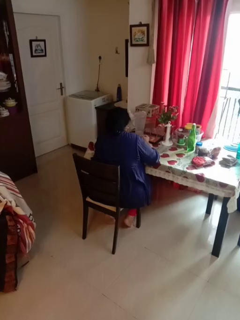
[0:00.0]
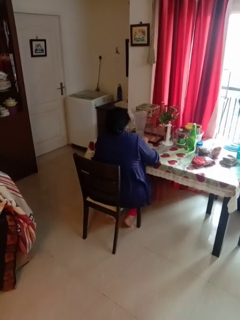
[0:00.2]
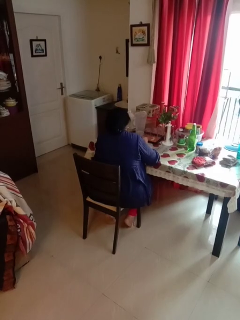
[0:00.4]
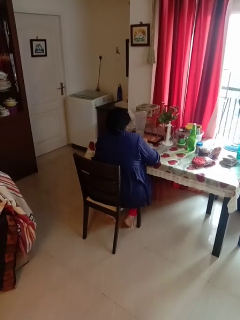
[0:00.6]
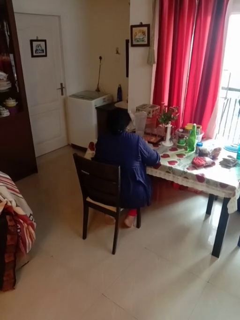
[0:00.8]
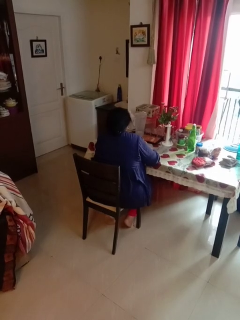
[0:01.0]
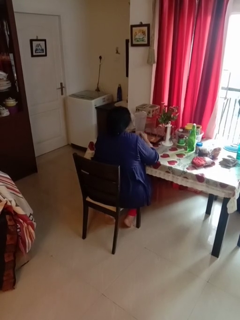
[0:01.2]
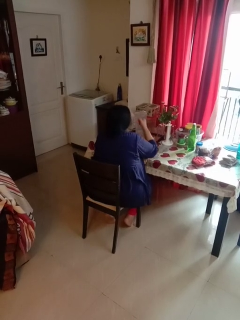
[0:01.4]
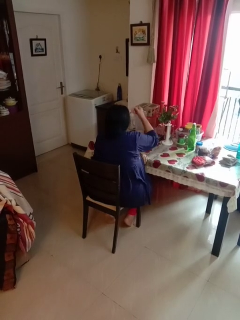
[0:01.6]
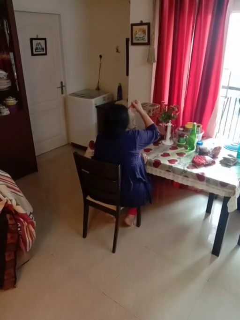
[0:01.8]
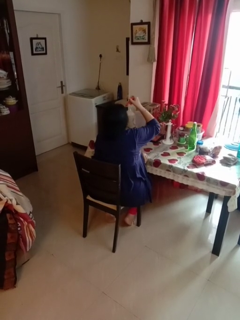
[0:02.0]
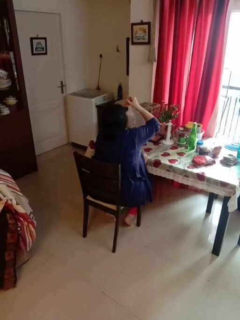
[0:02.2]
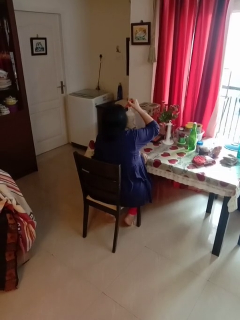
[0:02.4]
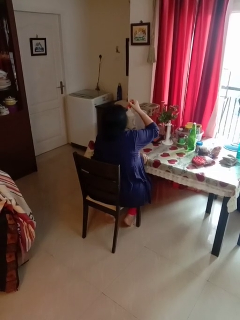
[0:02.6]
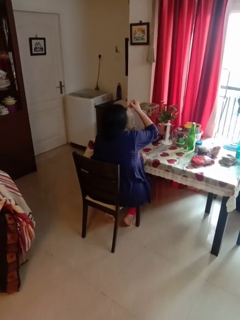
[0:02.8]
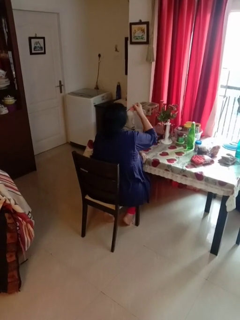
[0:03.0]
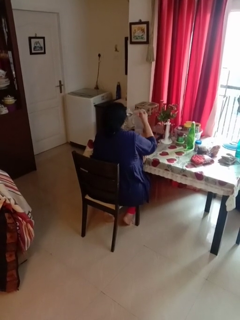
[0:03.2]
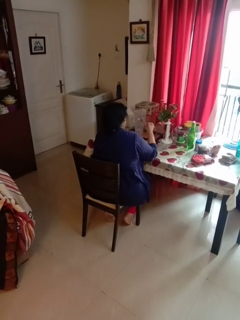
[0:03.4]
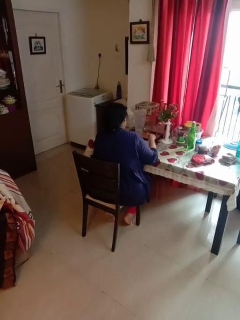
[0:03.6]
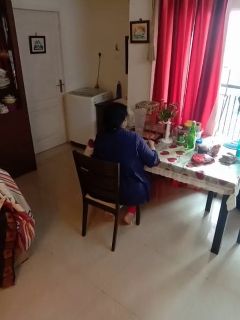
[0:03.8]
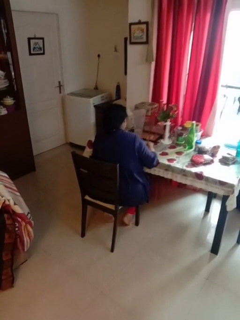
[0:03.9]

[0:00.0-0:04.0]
person eats with utensil

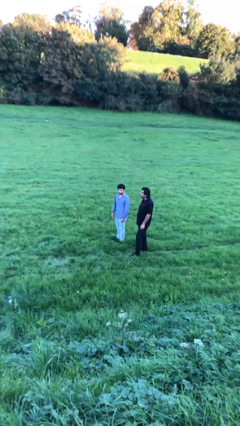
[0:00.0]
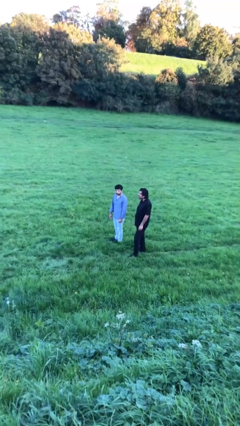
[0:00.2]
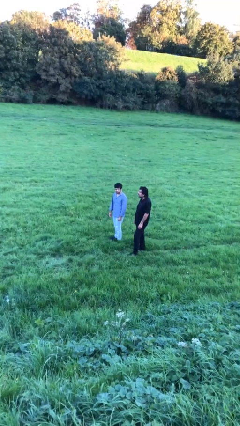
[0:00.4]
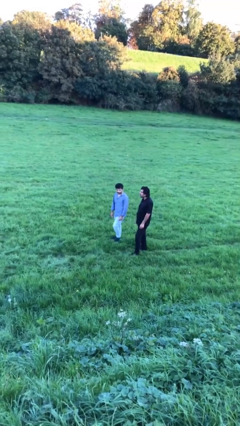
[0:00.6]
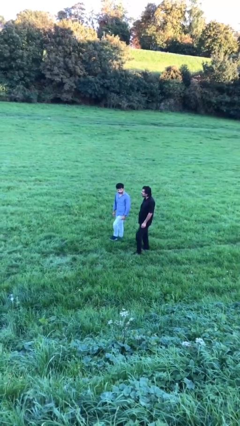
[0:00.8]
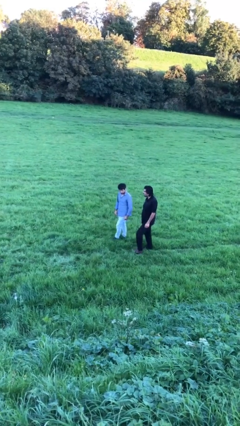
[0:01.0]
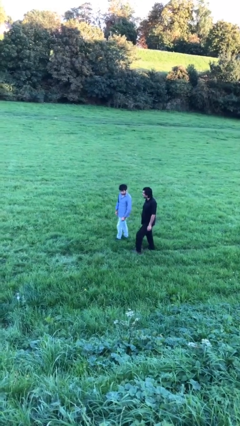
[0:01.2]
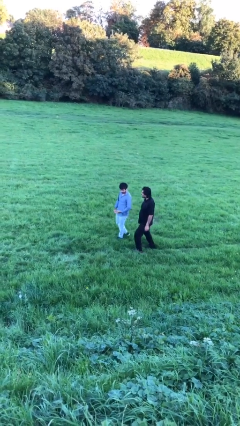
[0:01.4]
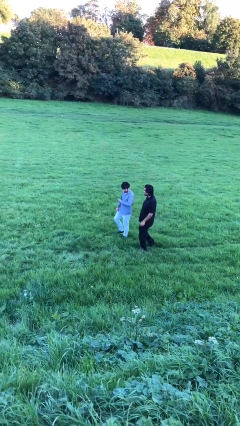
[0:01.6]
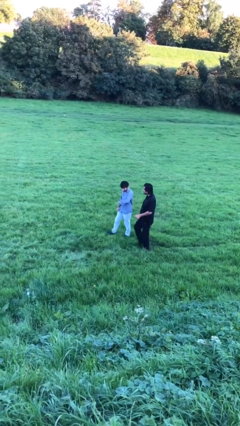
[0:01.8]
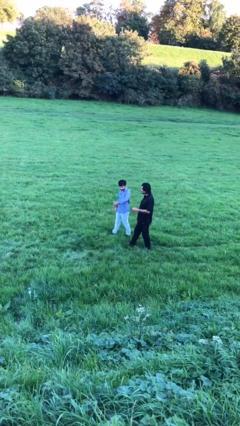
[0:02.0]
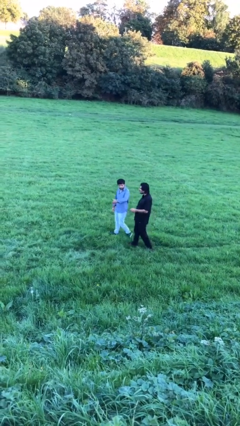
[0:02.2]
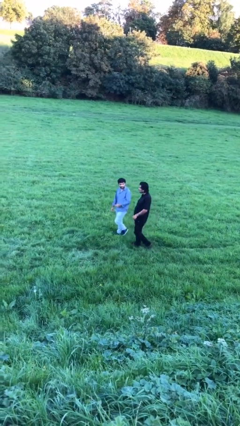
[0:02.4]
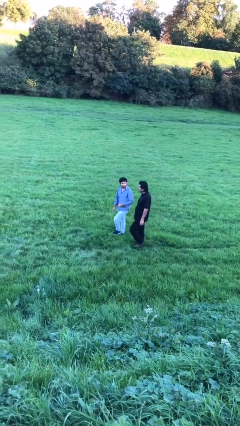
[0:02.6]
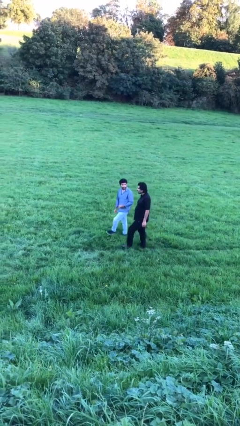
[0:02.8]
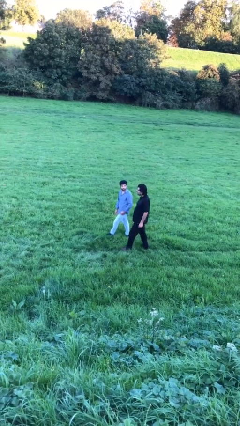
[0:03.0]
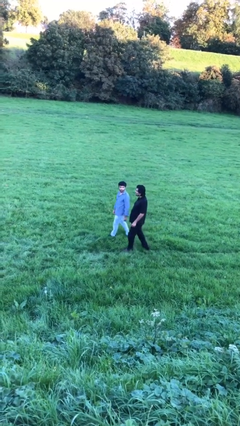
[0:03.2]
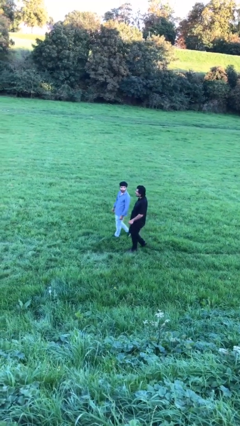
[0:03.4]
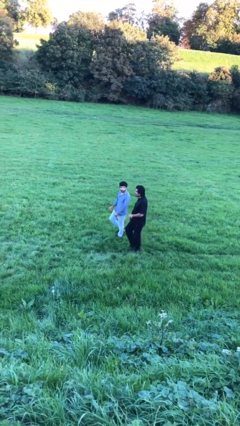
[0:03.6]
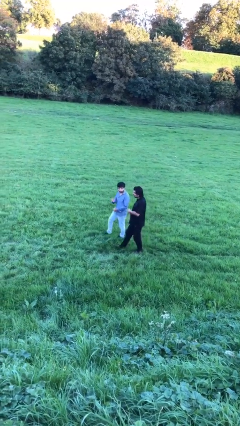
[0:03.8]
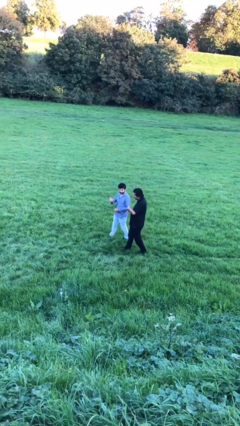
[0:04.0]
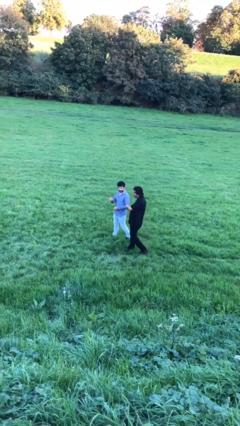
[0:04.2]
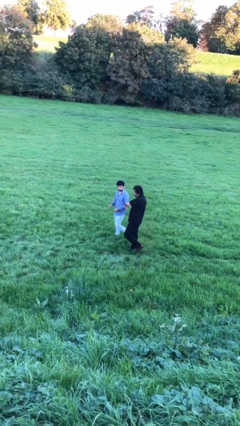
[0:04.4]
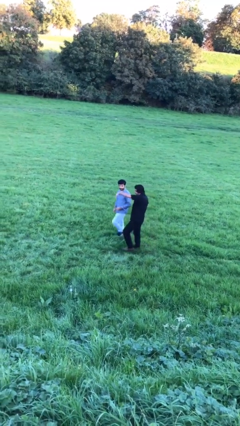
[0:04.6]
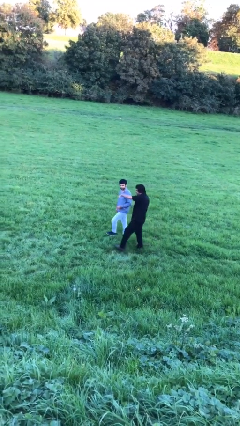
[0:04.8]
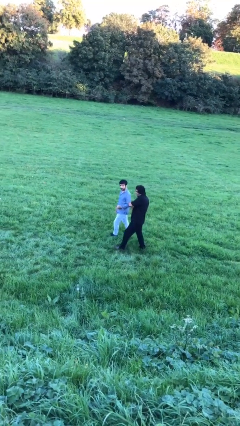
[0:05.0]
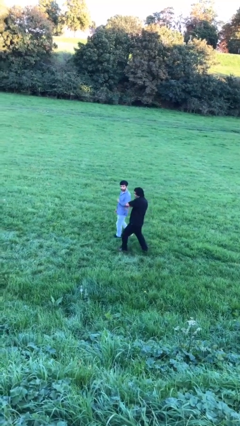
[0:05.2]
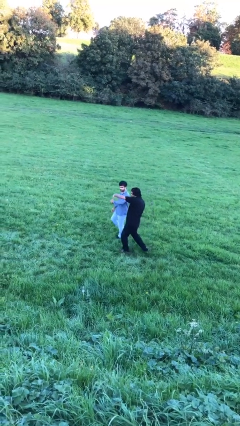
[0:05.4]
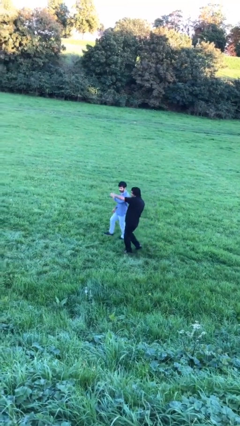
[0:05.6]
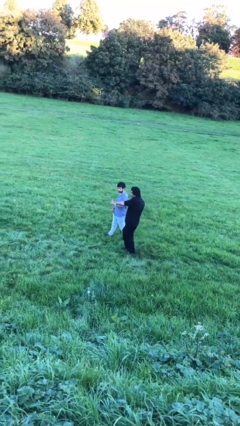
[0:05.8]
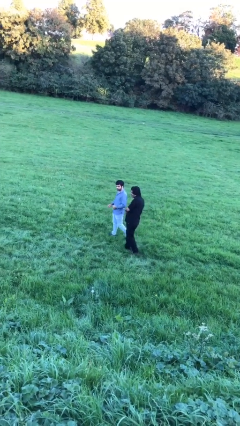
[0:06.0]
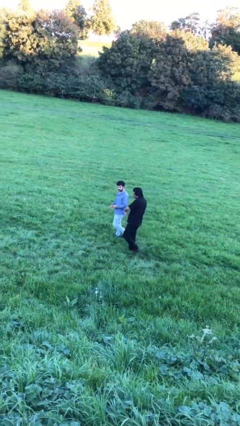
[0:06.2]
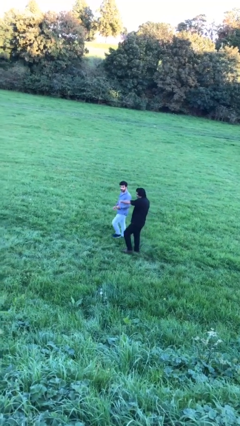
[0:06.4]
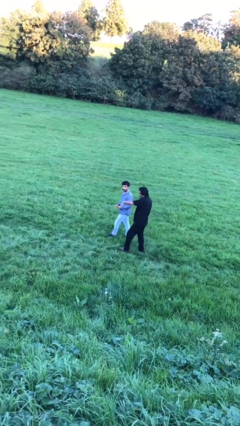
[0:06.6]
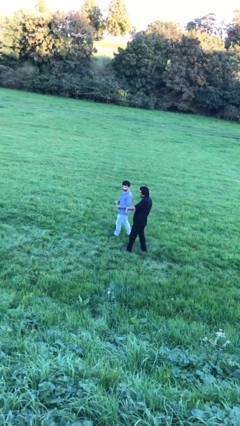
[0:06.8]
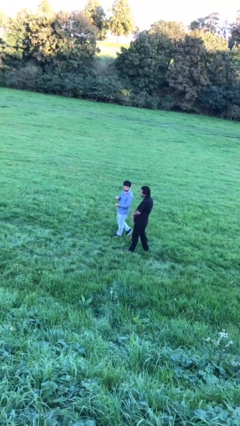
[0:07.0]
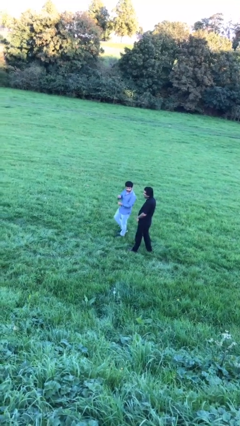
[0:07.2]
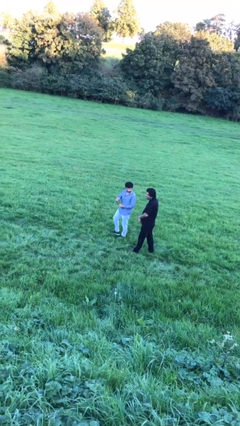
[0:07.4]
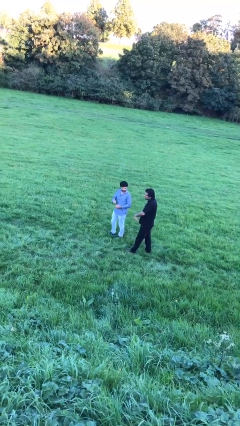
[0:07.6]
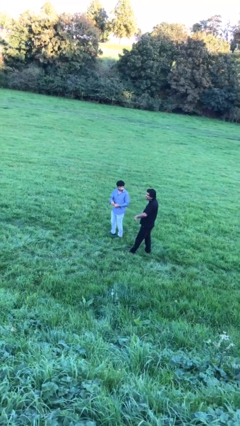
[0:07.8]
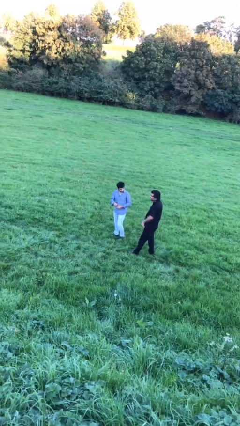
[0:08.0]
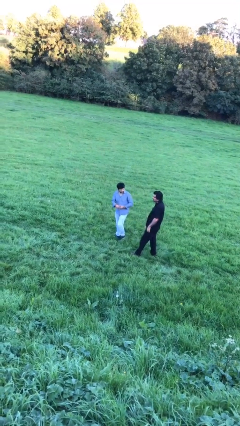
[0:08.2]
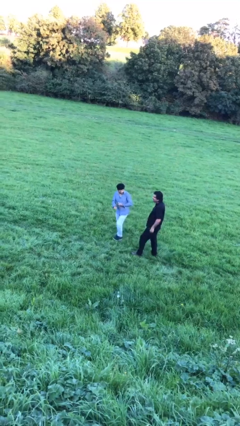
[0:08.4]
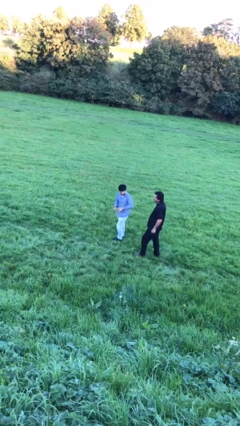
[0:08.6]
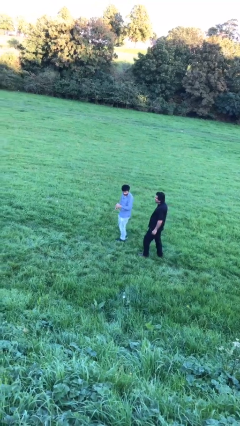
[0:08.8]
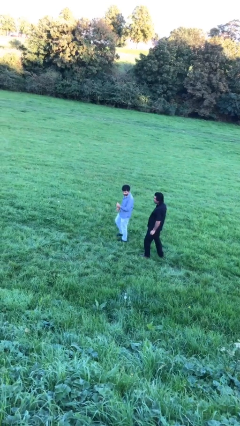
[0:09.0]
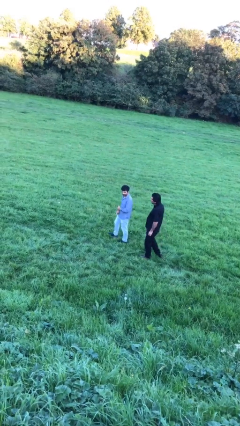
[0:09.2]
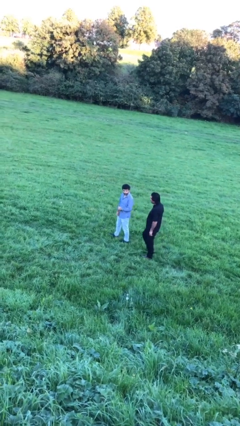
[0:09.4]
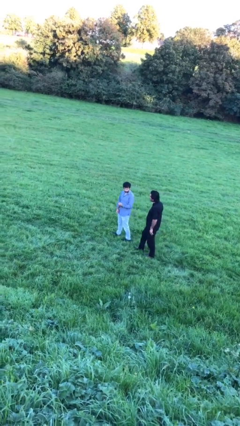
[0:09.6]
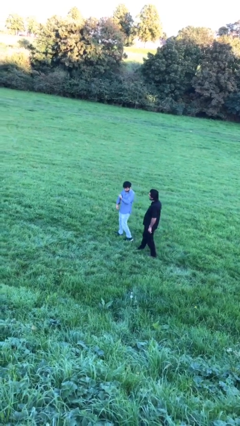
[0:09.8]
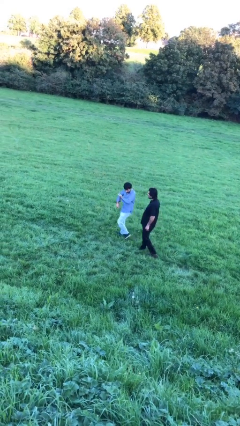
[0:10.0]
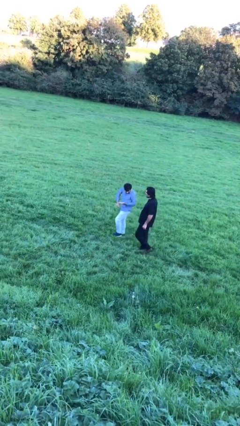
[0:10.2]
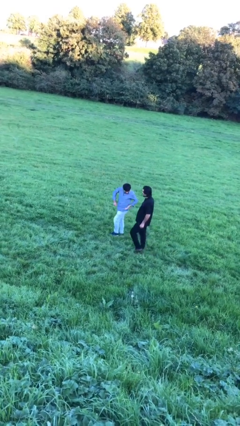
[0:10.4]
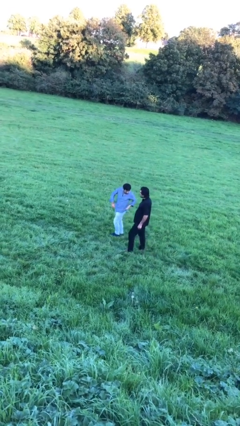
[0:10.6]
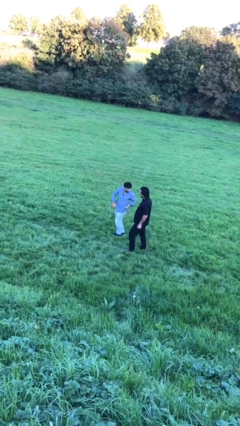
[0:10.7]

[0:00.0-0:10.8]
person talks to person

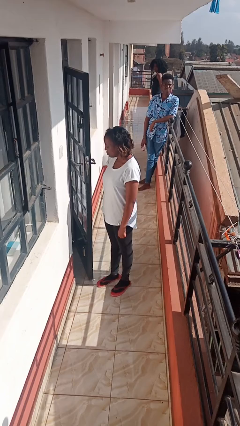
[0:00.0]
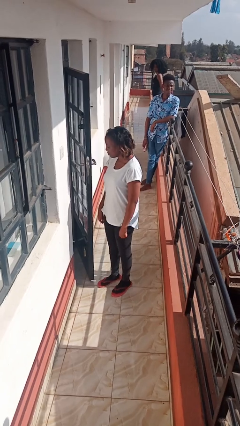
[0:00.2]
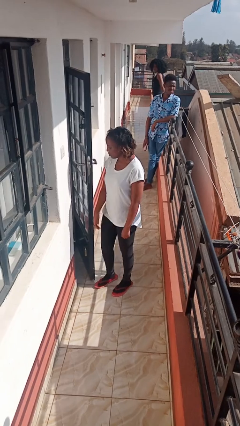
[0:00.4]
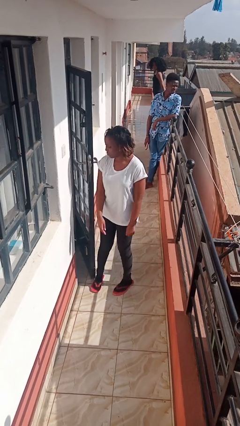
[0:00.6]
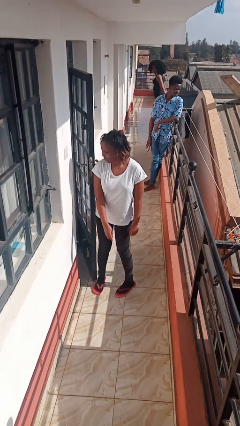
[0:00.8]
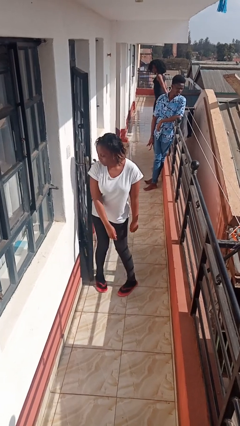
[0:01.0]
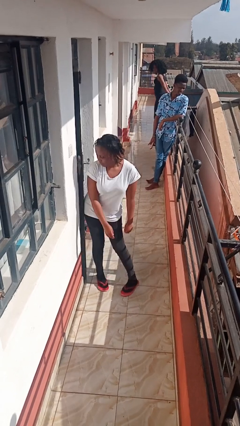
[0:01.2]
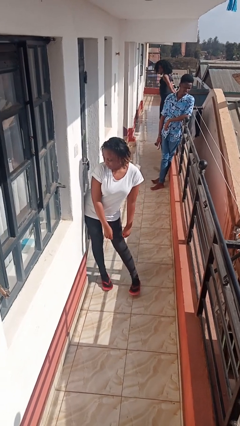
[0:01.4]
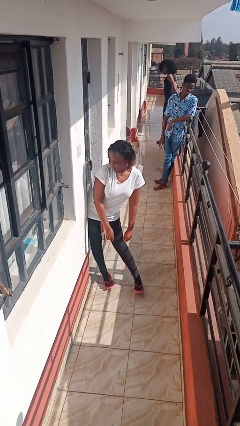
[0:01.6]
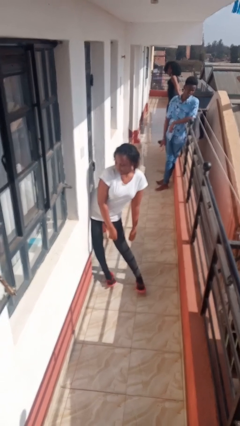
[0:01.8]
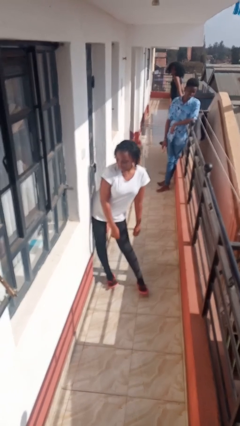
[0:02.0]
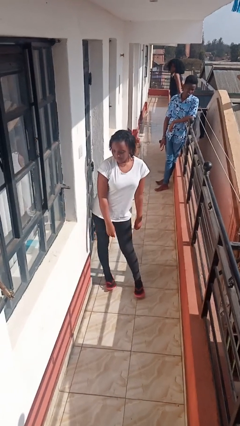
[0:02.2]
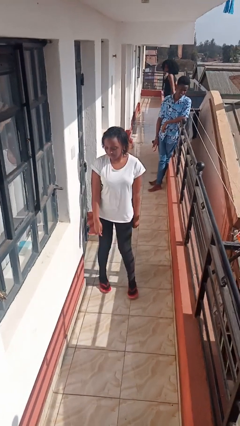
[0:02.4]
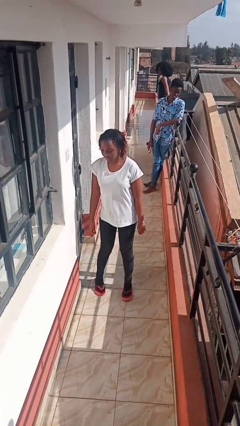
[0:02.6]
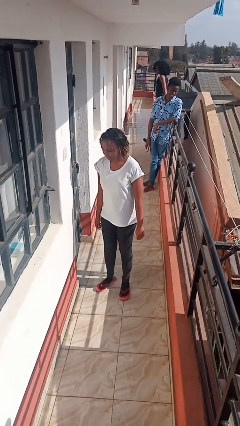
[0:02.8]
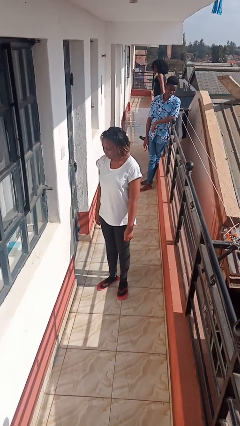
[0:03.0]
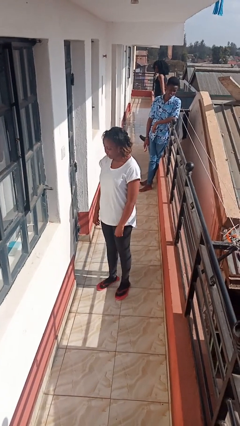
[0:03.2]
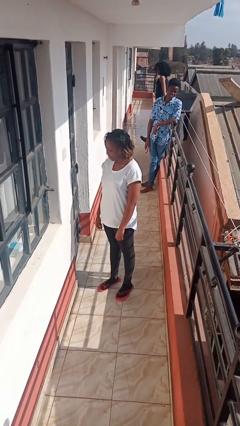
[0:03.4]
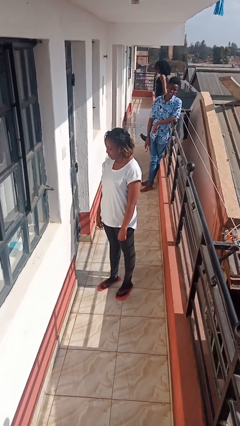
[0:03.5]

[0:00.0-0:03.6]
person closes door with hip

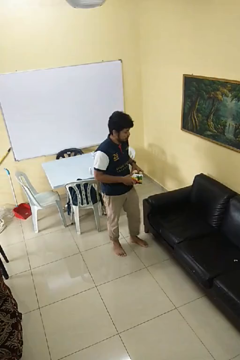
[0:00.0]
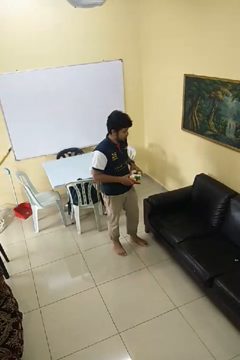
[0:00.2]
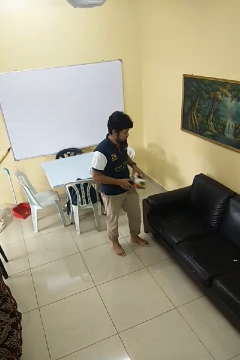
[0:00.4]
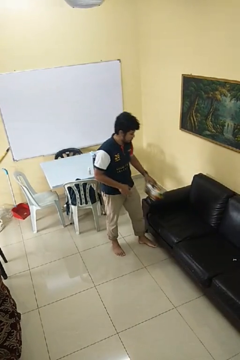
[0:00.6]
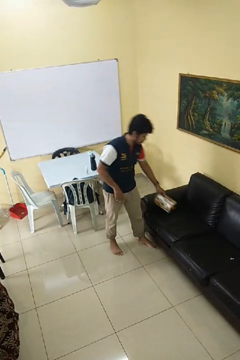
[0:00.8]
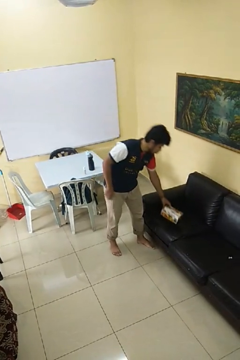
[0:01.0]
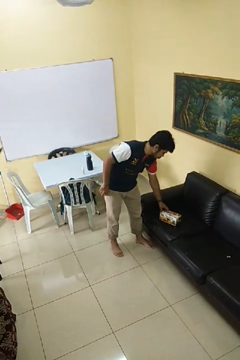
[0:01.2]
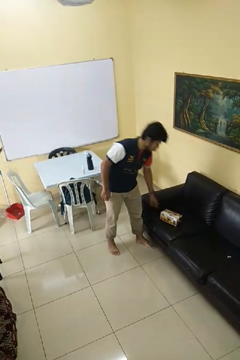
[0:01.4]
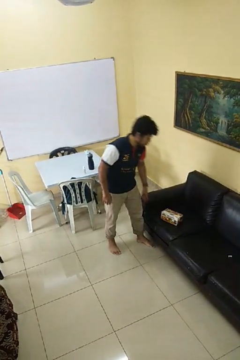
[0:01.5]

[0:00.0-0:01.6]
person puts down object on couch
